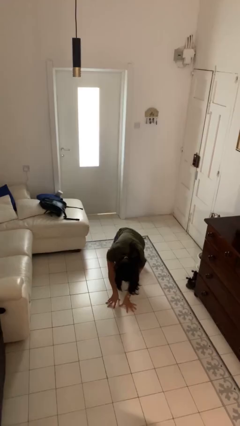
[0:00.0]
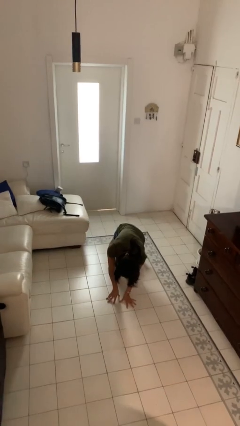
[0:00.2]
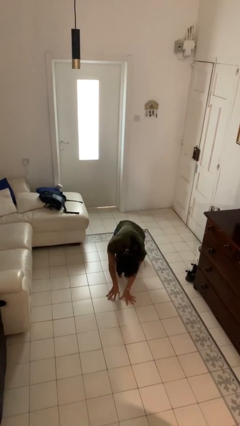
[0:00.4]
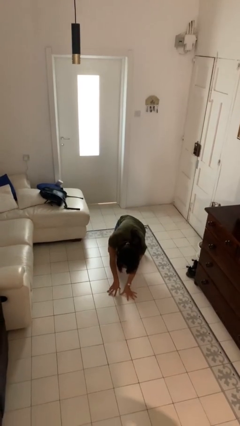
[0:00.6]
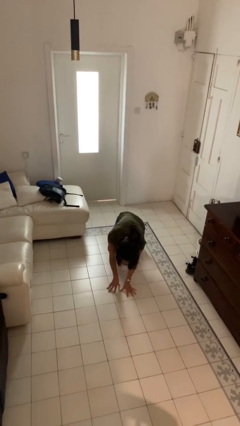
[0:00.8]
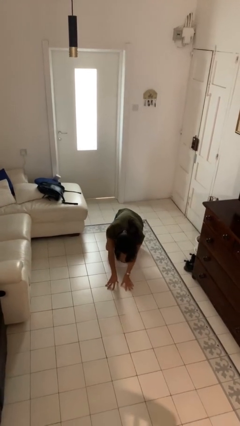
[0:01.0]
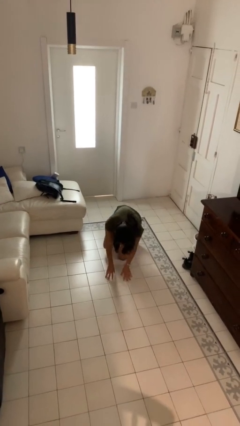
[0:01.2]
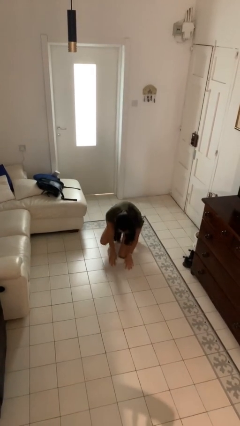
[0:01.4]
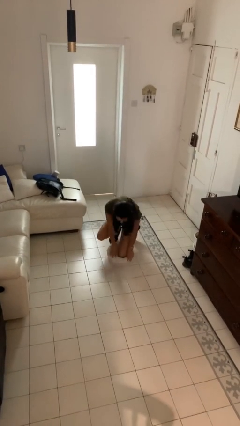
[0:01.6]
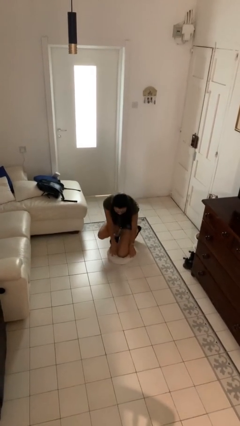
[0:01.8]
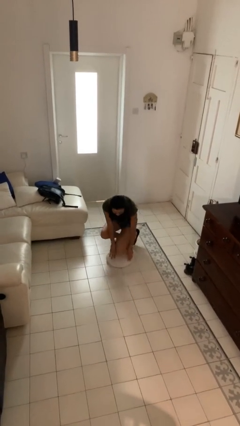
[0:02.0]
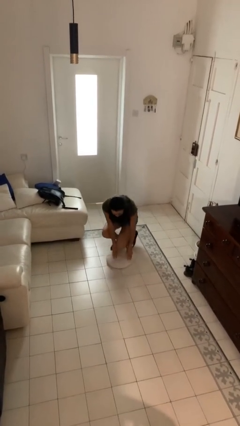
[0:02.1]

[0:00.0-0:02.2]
person lies down on floor

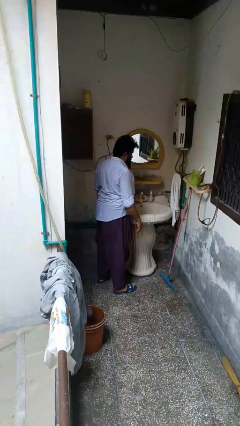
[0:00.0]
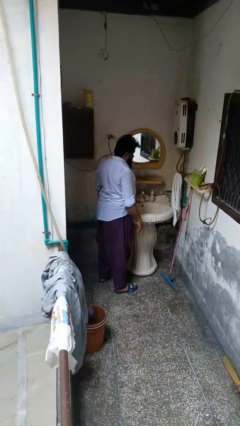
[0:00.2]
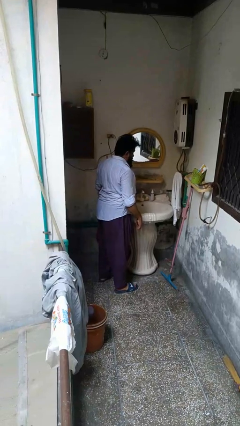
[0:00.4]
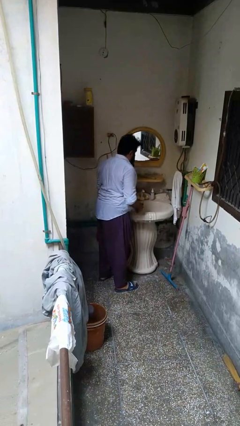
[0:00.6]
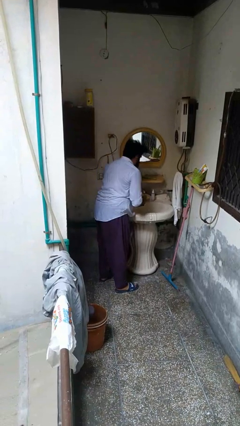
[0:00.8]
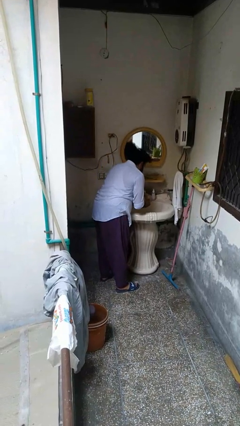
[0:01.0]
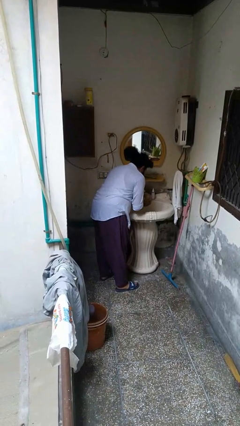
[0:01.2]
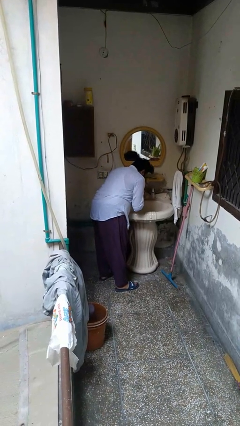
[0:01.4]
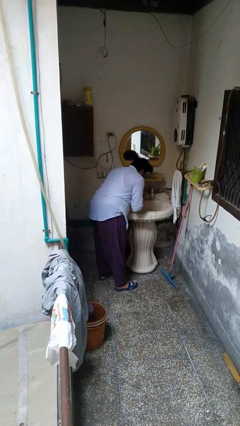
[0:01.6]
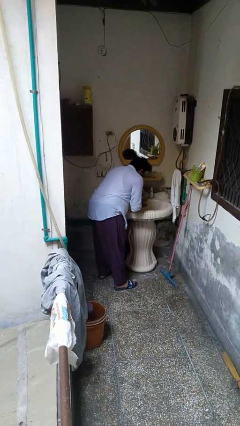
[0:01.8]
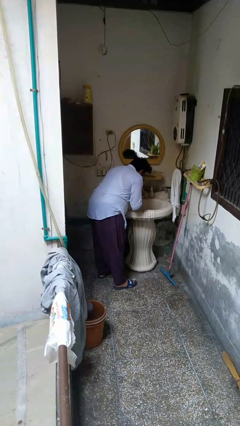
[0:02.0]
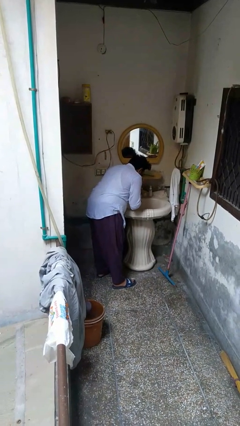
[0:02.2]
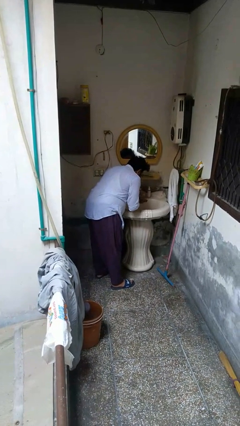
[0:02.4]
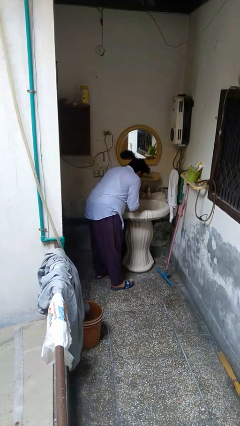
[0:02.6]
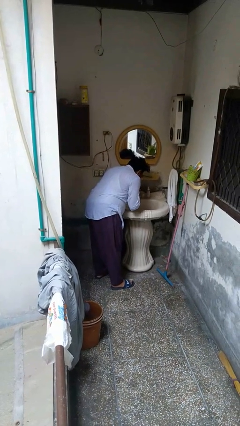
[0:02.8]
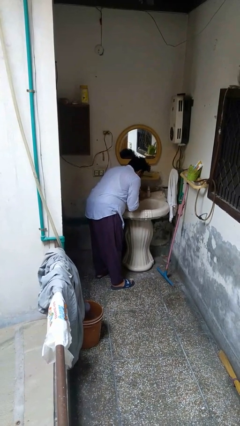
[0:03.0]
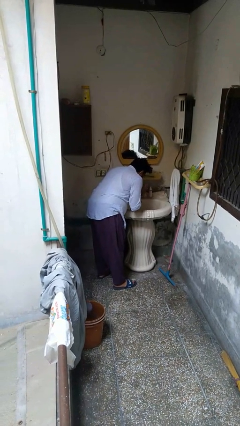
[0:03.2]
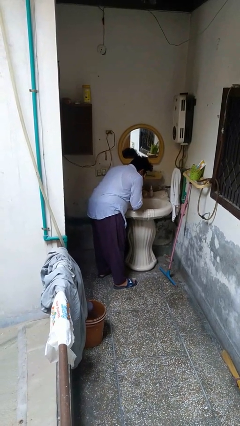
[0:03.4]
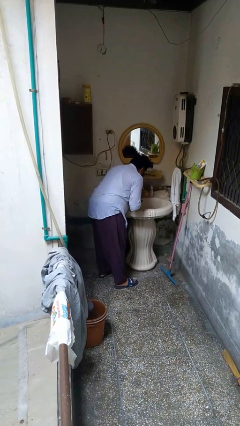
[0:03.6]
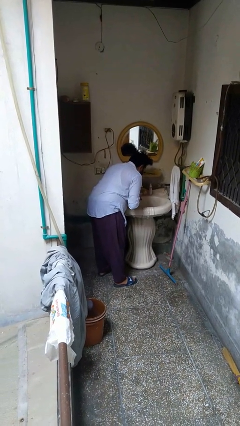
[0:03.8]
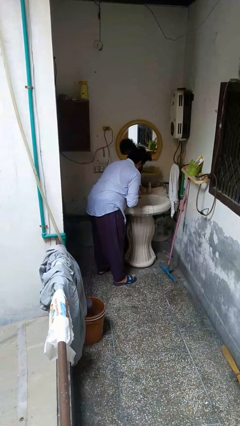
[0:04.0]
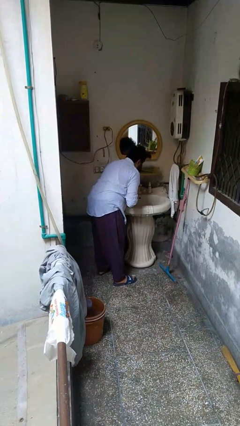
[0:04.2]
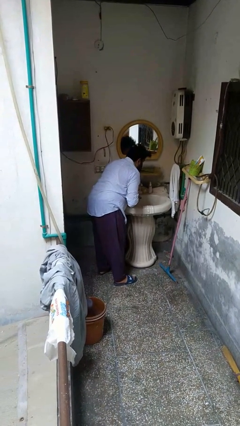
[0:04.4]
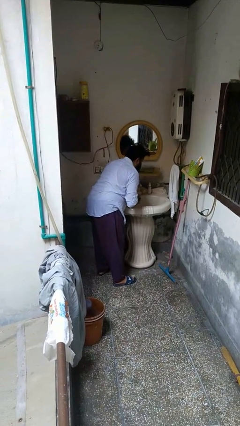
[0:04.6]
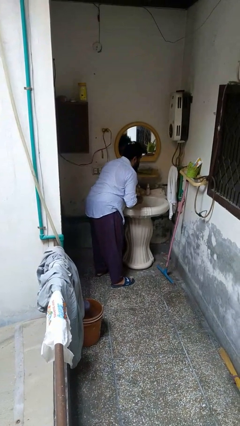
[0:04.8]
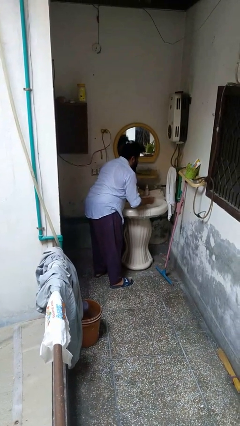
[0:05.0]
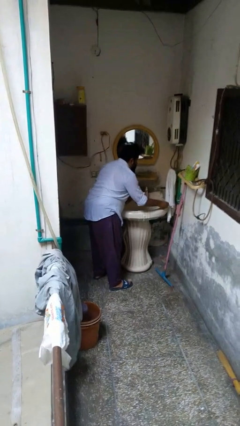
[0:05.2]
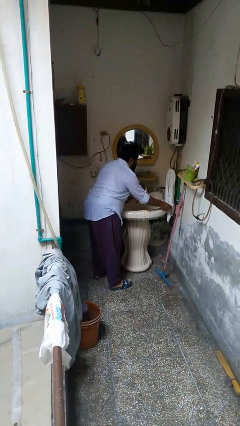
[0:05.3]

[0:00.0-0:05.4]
person washes face

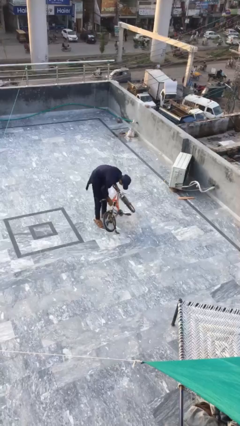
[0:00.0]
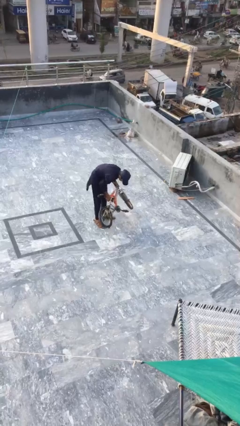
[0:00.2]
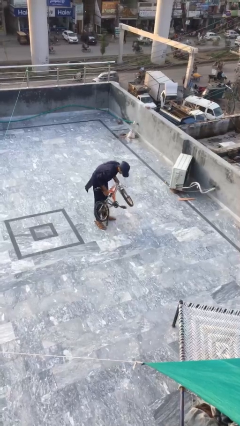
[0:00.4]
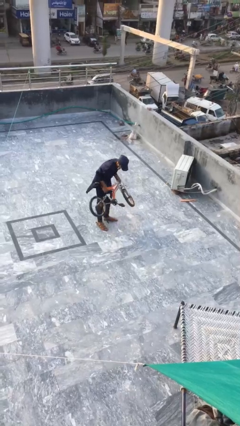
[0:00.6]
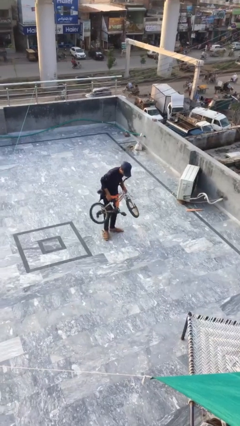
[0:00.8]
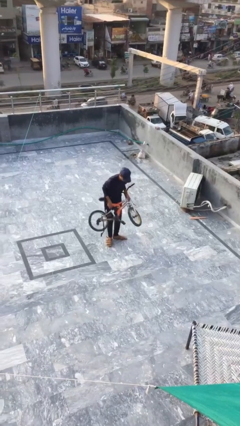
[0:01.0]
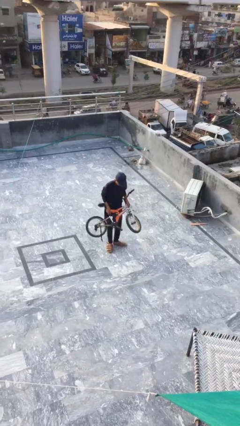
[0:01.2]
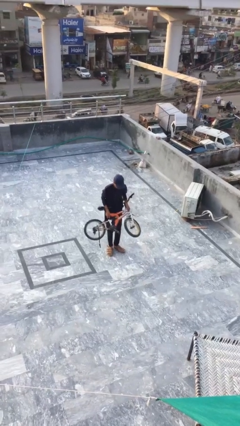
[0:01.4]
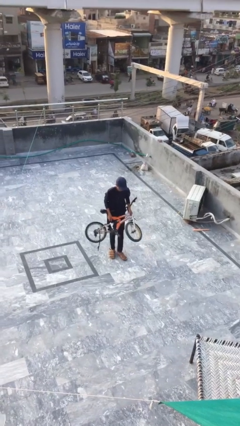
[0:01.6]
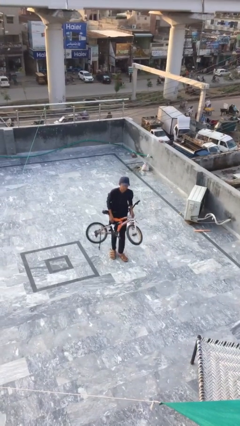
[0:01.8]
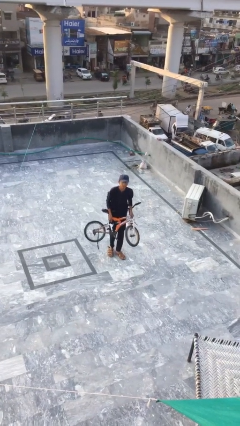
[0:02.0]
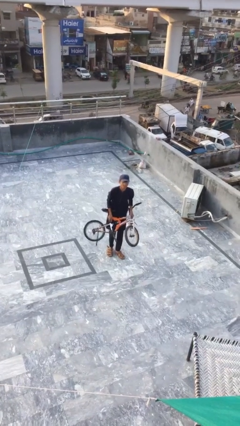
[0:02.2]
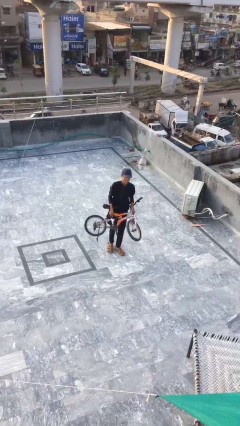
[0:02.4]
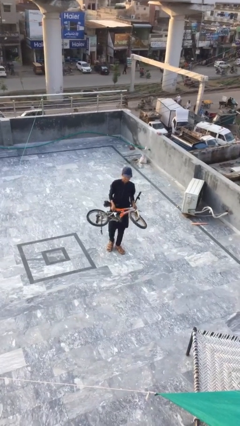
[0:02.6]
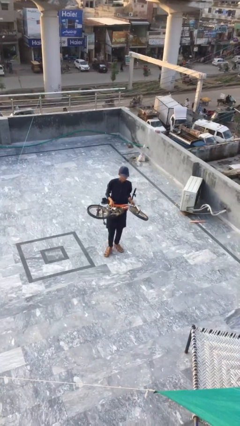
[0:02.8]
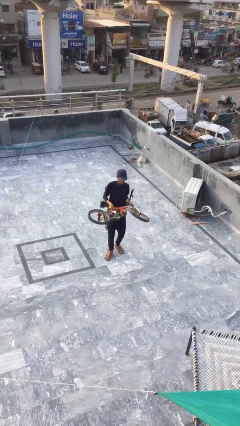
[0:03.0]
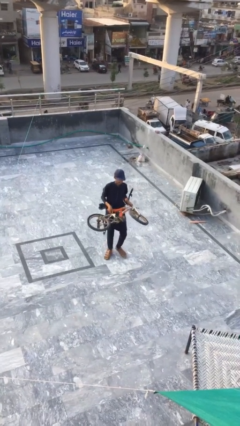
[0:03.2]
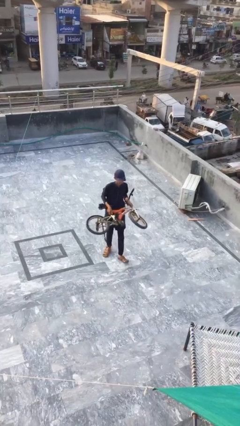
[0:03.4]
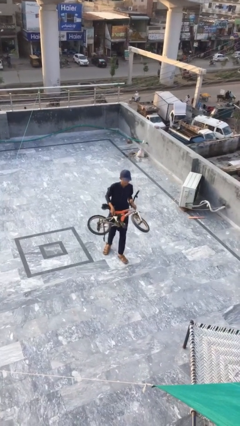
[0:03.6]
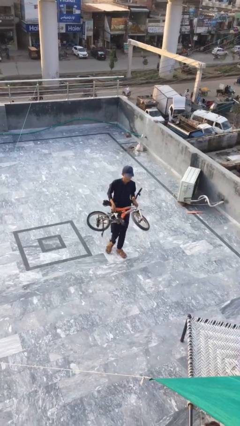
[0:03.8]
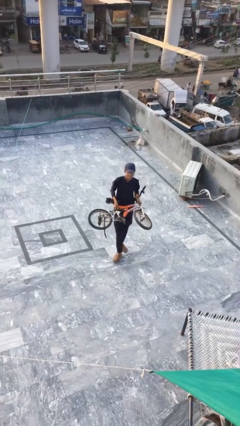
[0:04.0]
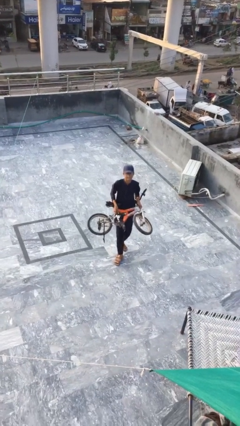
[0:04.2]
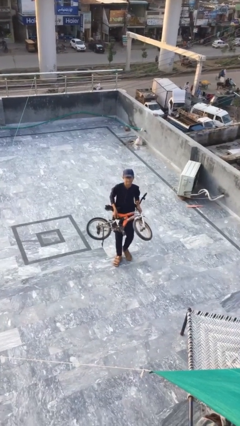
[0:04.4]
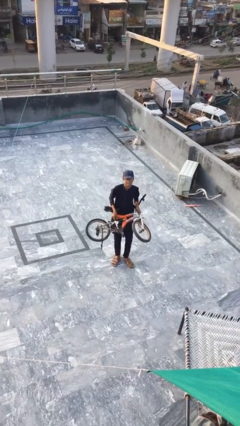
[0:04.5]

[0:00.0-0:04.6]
person carries heavy object

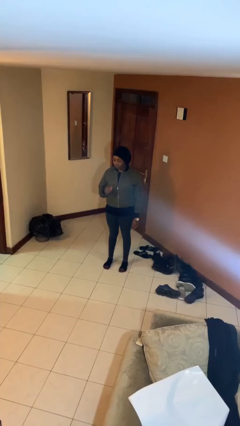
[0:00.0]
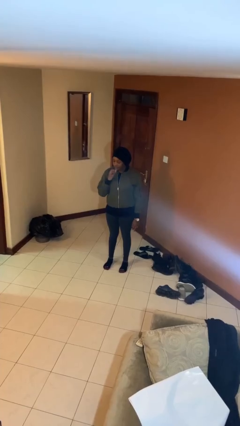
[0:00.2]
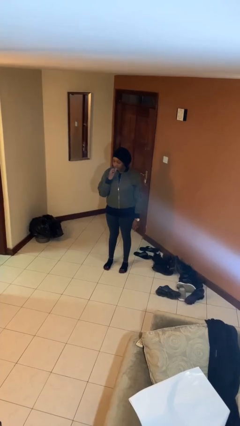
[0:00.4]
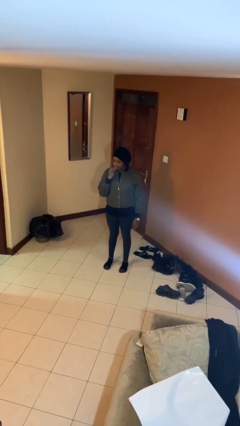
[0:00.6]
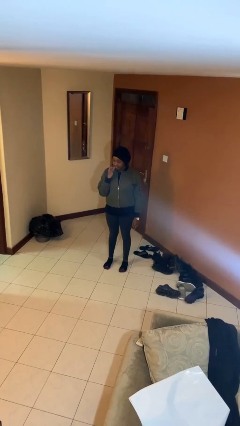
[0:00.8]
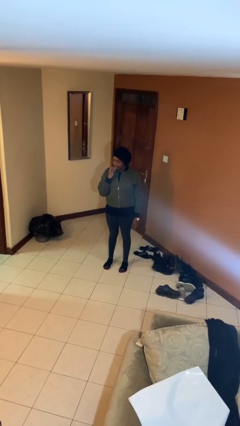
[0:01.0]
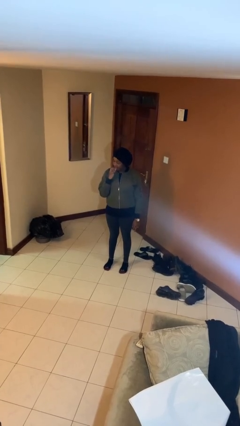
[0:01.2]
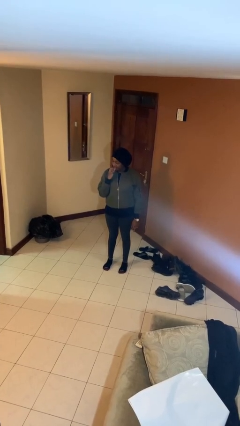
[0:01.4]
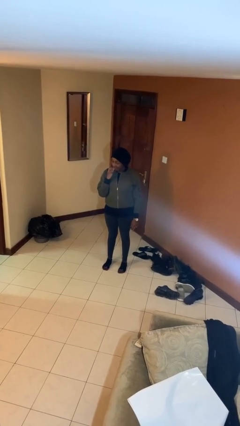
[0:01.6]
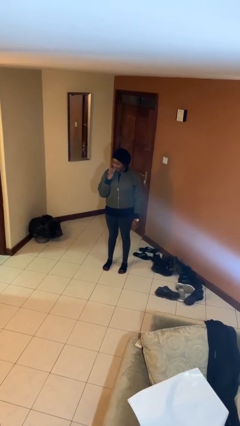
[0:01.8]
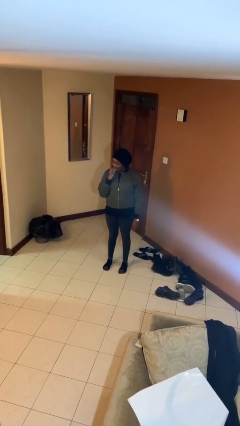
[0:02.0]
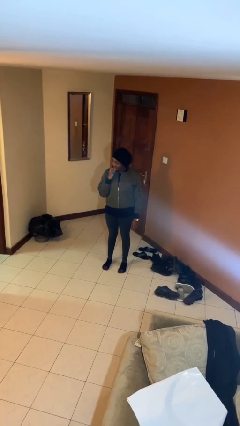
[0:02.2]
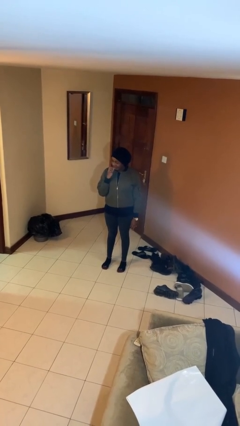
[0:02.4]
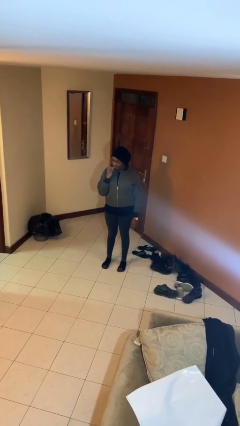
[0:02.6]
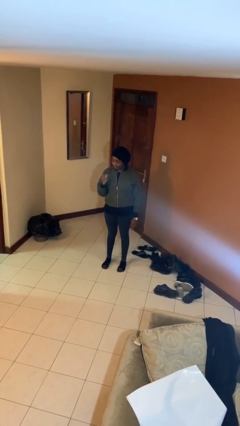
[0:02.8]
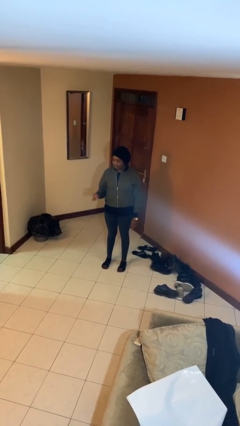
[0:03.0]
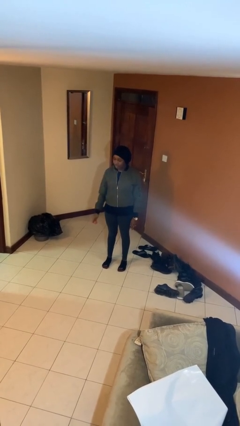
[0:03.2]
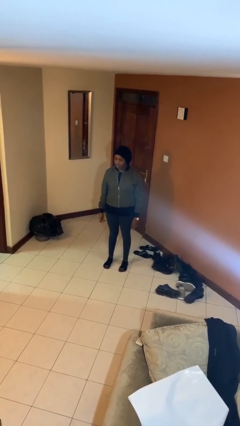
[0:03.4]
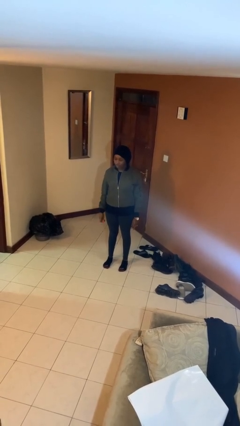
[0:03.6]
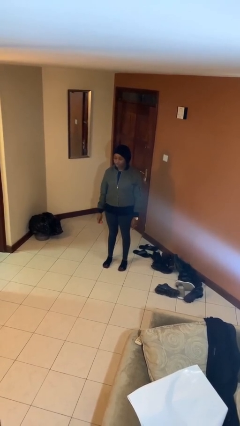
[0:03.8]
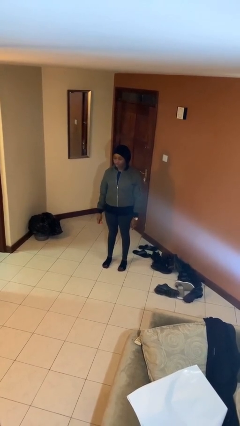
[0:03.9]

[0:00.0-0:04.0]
person applies lip makeup

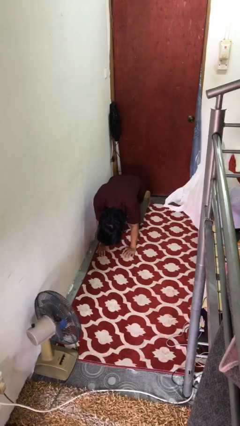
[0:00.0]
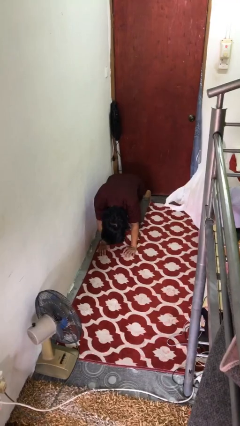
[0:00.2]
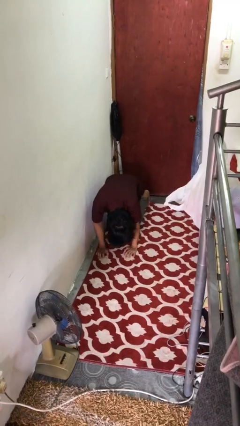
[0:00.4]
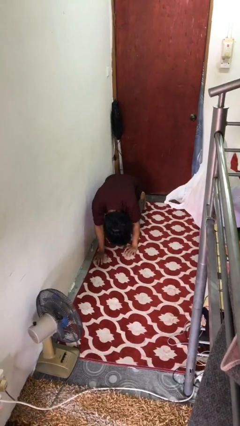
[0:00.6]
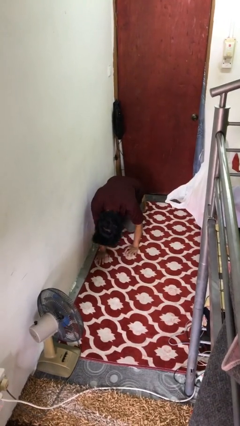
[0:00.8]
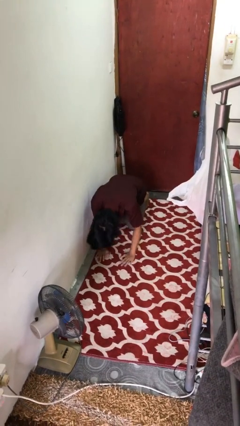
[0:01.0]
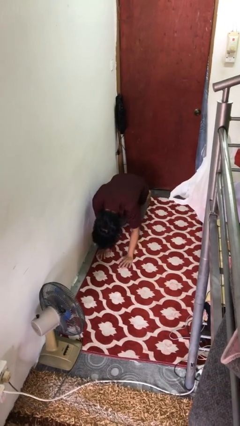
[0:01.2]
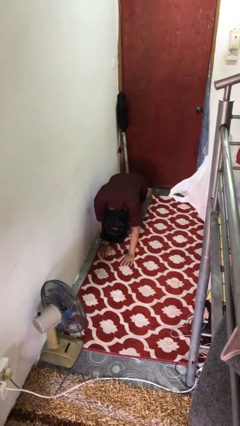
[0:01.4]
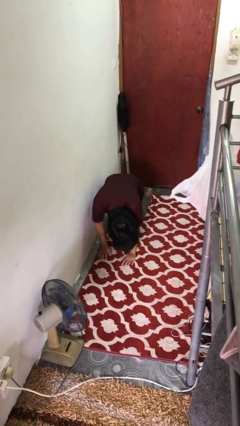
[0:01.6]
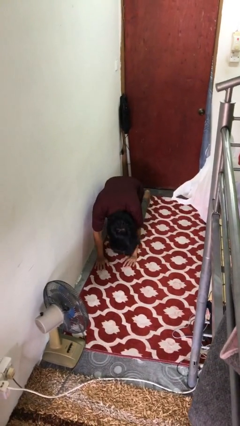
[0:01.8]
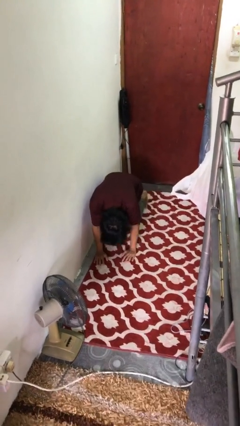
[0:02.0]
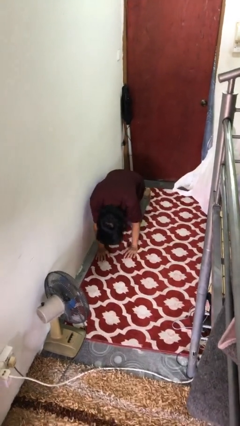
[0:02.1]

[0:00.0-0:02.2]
person crawls
